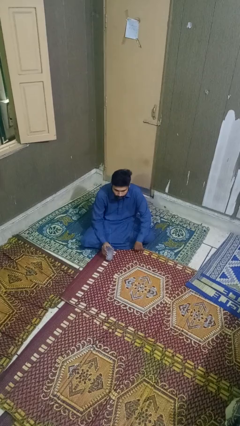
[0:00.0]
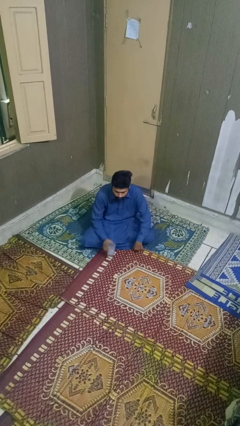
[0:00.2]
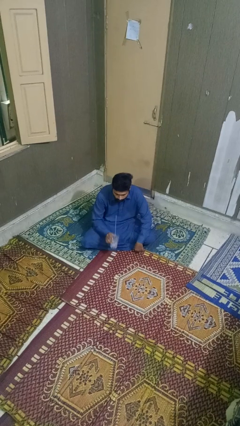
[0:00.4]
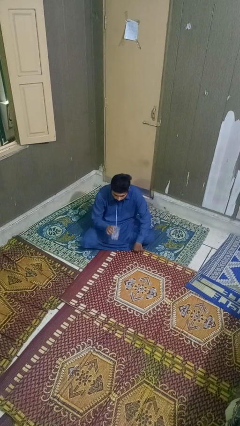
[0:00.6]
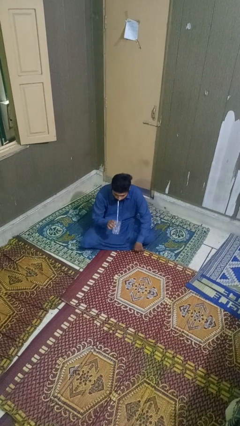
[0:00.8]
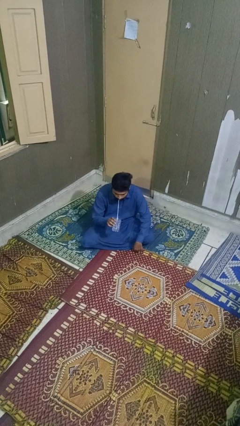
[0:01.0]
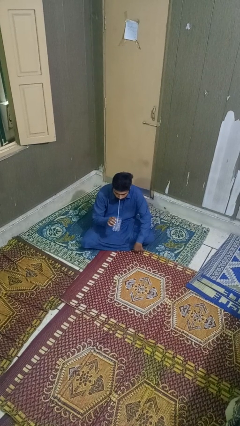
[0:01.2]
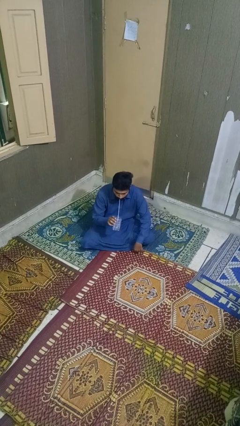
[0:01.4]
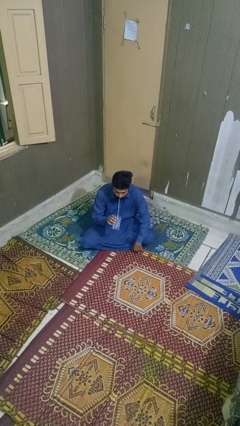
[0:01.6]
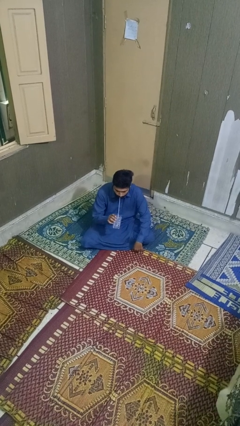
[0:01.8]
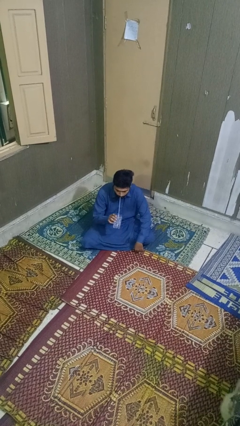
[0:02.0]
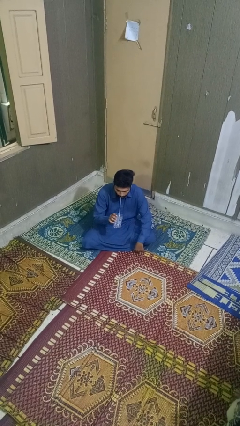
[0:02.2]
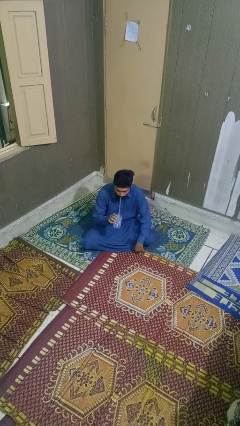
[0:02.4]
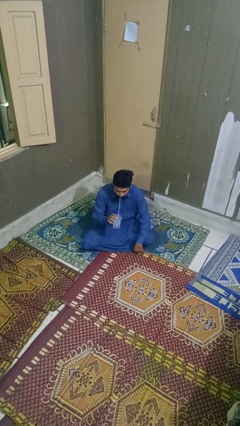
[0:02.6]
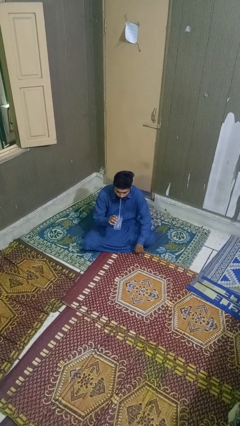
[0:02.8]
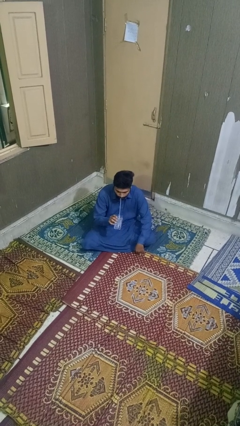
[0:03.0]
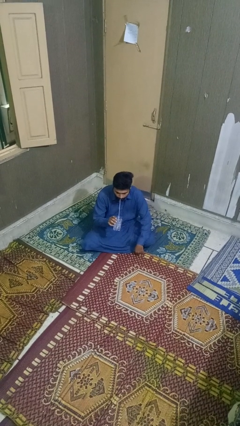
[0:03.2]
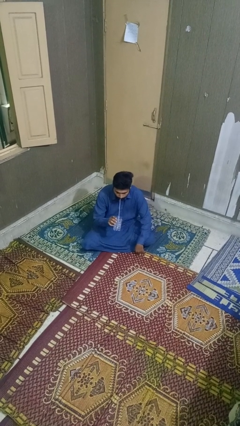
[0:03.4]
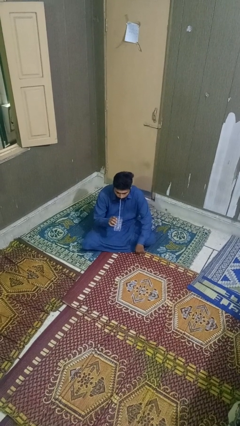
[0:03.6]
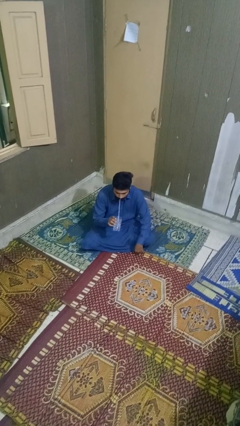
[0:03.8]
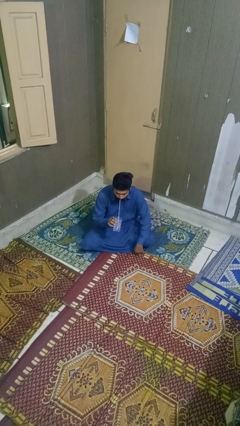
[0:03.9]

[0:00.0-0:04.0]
person drinks from straw

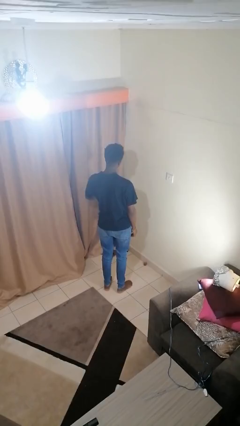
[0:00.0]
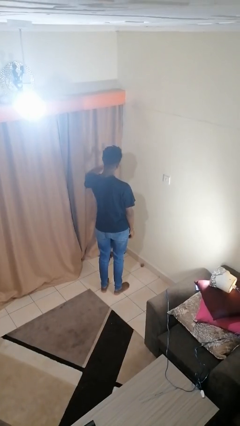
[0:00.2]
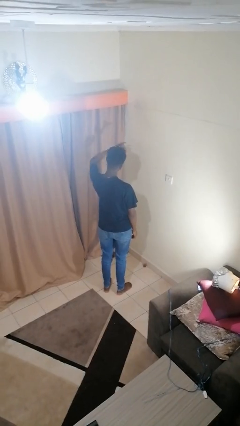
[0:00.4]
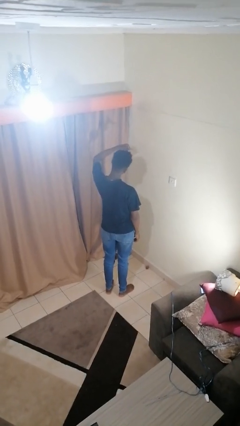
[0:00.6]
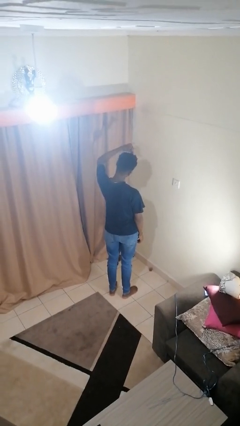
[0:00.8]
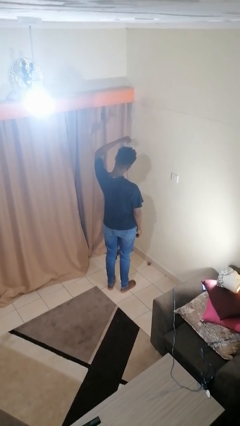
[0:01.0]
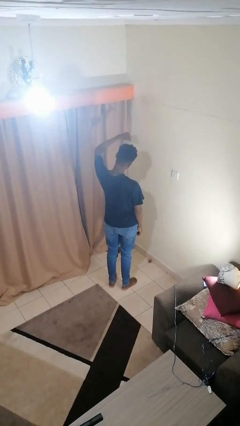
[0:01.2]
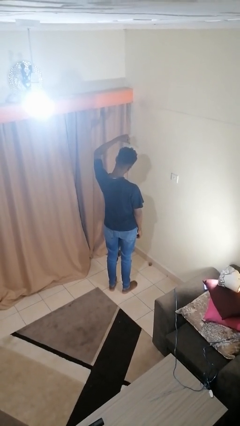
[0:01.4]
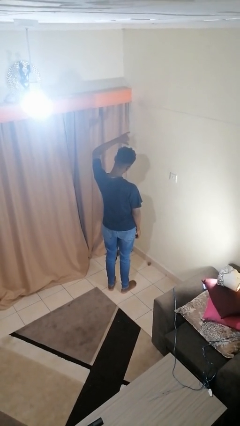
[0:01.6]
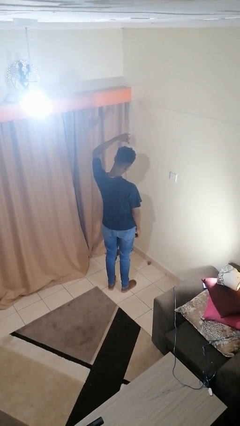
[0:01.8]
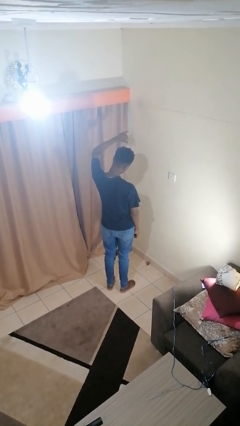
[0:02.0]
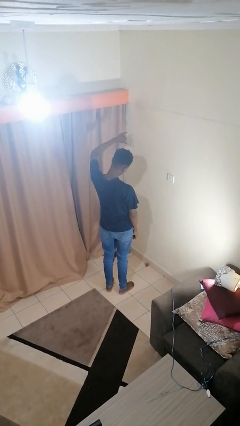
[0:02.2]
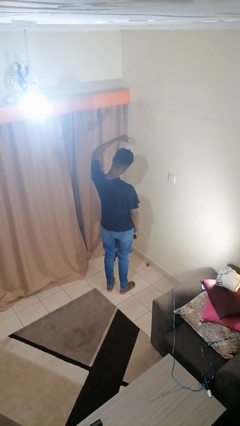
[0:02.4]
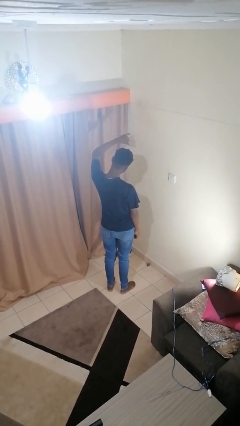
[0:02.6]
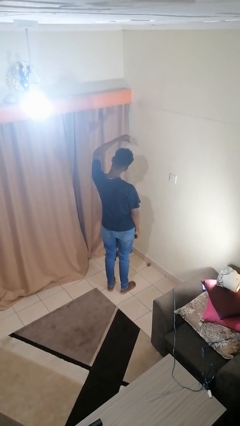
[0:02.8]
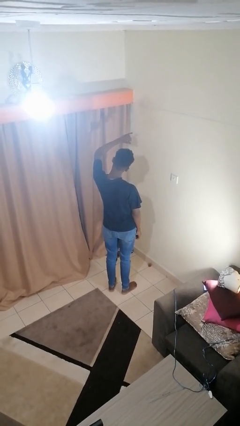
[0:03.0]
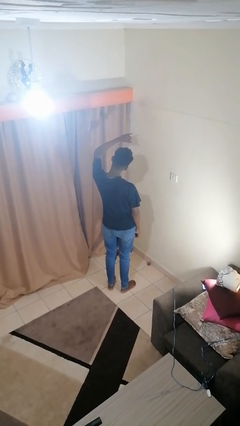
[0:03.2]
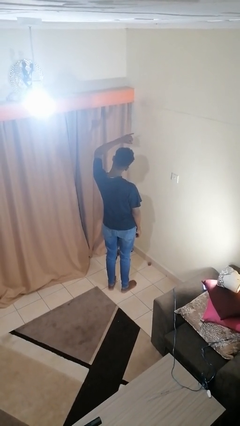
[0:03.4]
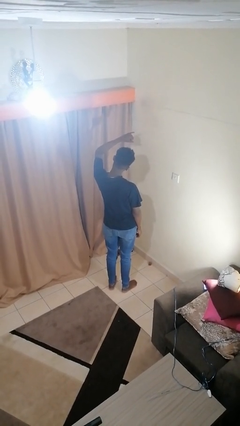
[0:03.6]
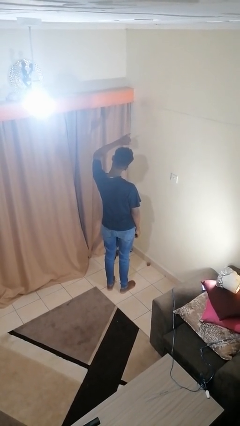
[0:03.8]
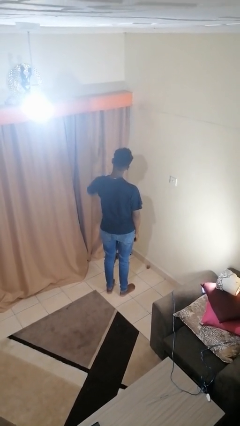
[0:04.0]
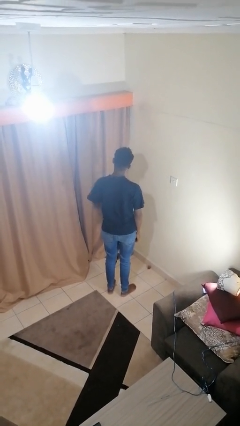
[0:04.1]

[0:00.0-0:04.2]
person gestures hang loose

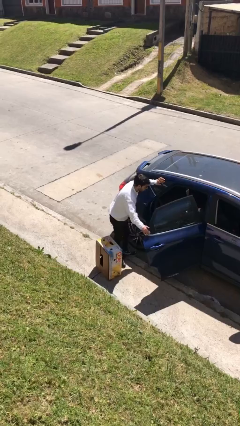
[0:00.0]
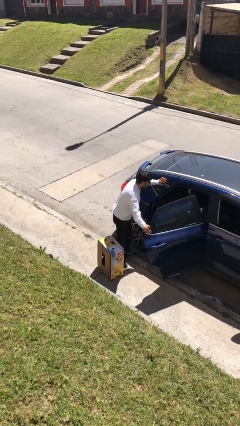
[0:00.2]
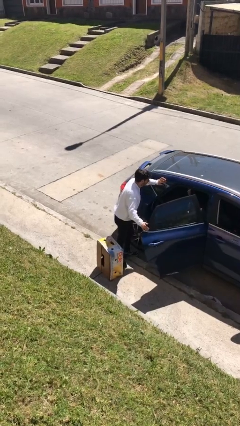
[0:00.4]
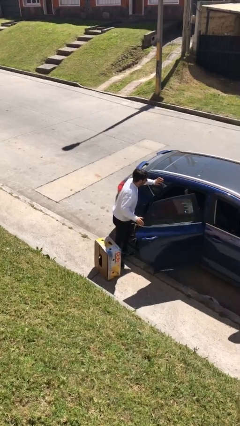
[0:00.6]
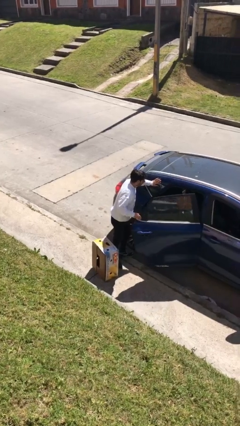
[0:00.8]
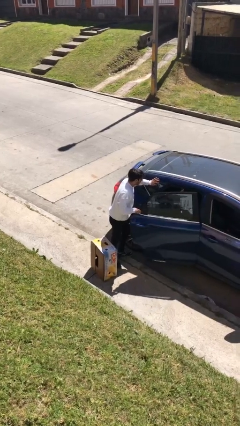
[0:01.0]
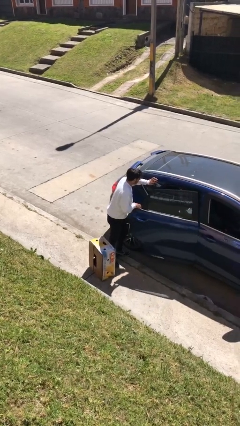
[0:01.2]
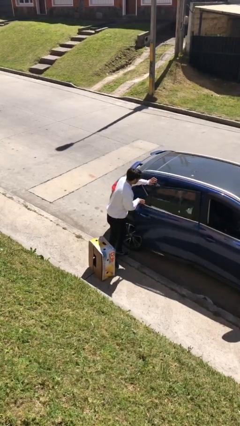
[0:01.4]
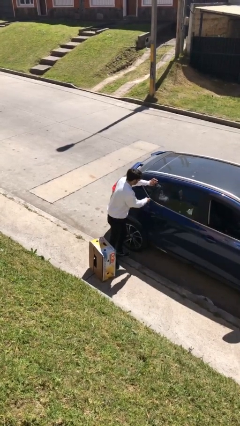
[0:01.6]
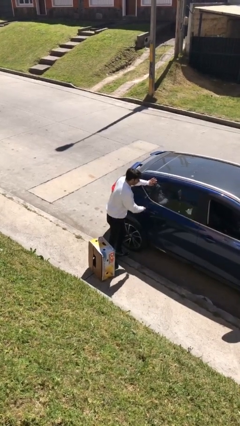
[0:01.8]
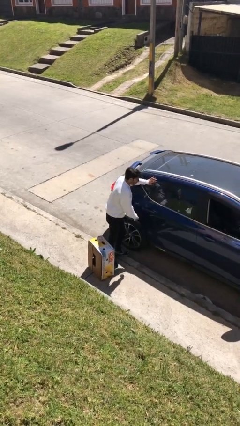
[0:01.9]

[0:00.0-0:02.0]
person closes car door

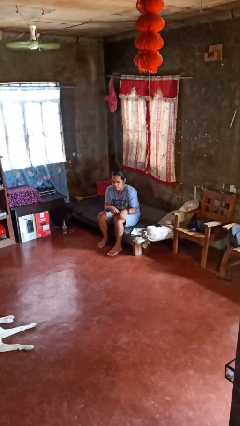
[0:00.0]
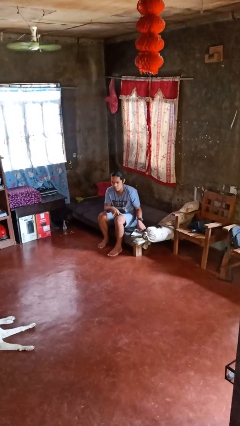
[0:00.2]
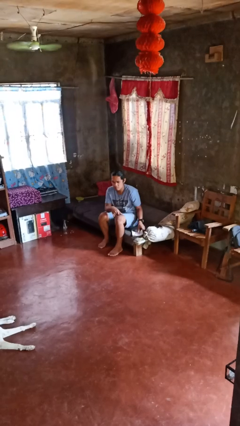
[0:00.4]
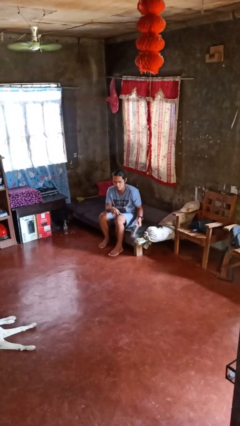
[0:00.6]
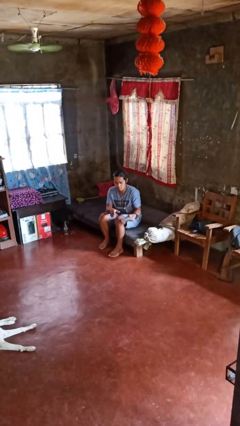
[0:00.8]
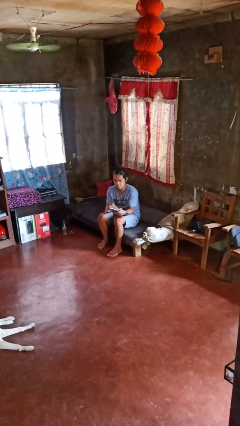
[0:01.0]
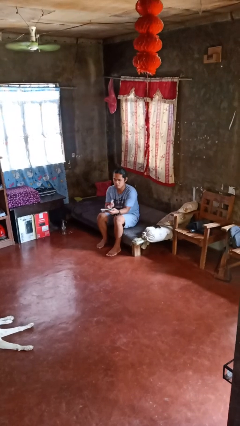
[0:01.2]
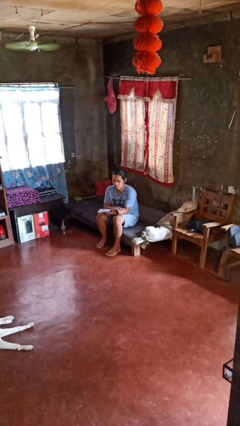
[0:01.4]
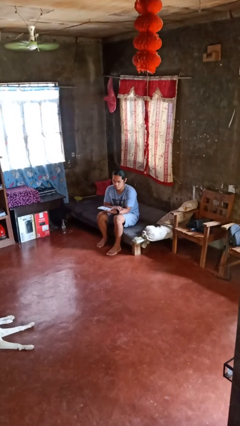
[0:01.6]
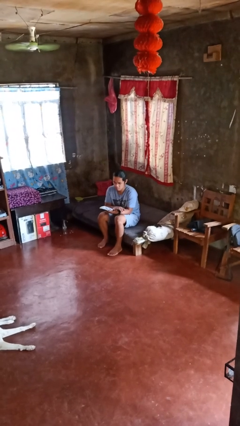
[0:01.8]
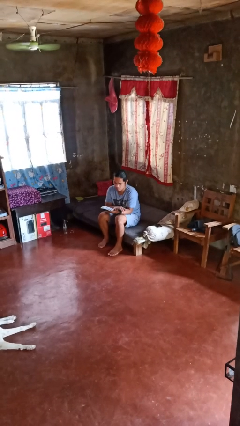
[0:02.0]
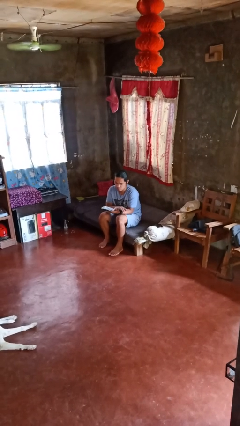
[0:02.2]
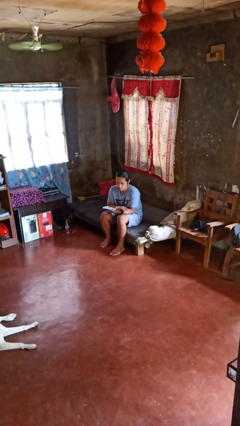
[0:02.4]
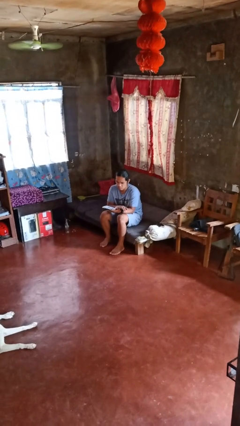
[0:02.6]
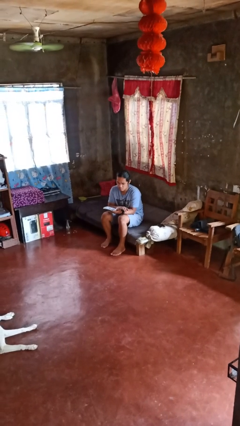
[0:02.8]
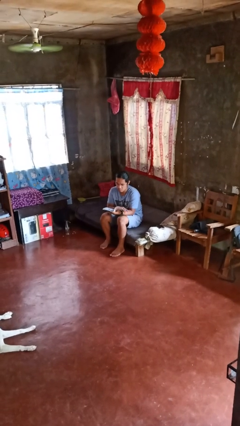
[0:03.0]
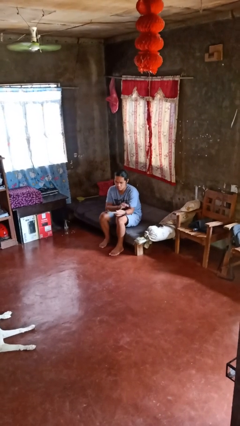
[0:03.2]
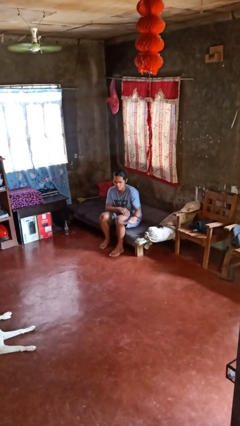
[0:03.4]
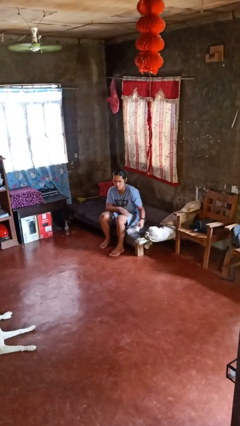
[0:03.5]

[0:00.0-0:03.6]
person reads magazine

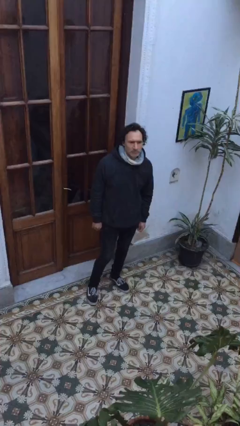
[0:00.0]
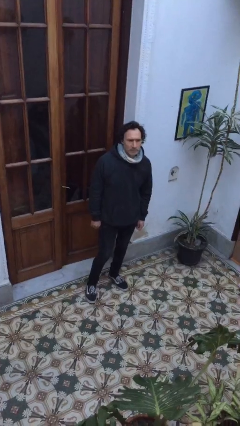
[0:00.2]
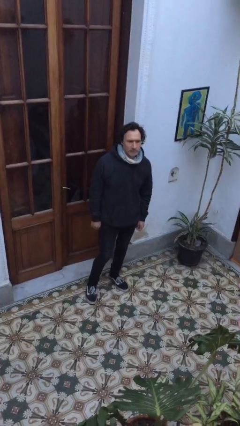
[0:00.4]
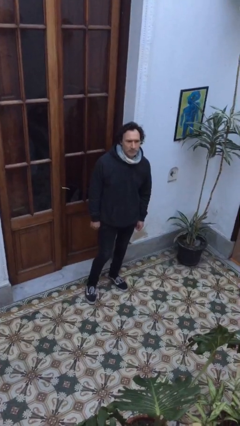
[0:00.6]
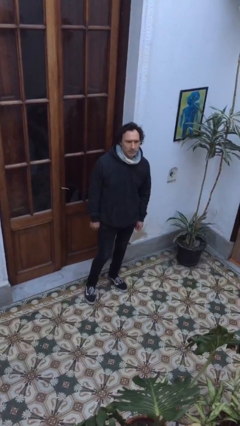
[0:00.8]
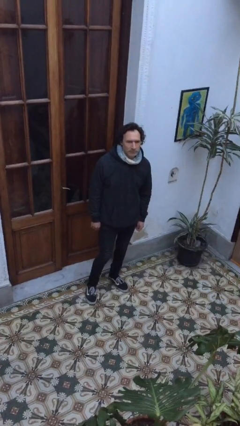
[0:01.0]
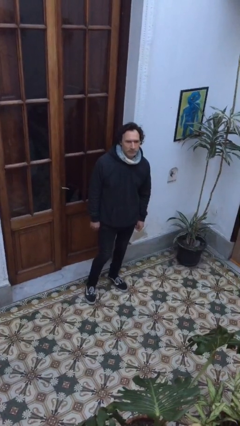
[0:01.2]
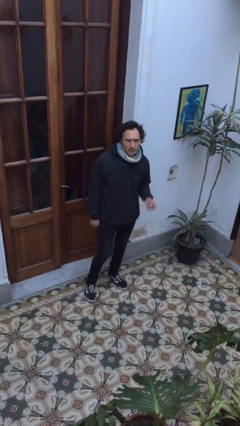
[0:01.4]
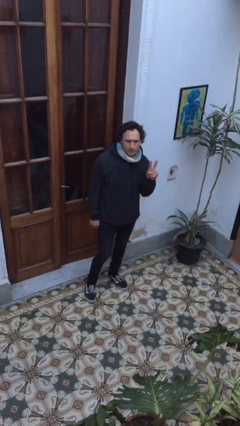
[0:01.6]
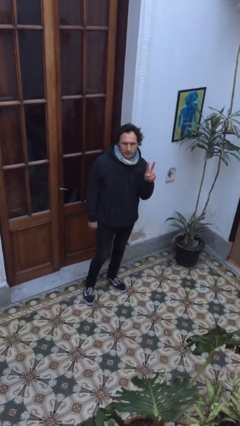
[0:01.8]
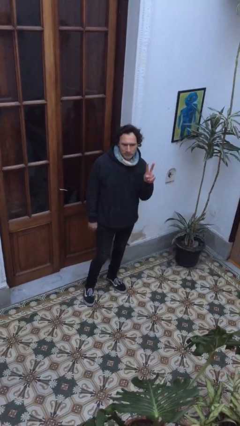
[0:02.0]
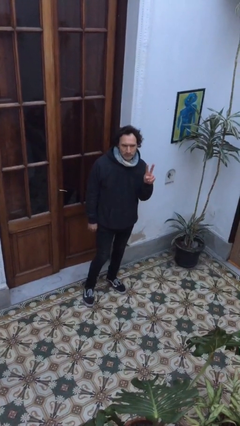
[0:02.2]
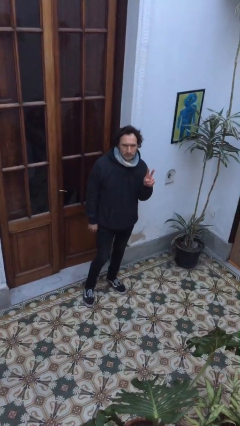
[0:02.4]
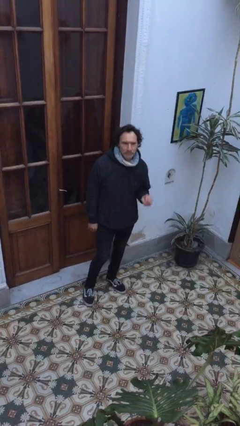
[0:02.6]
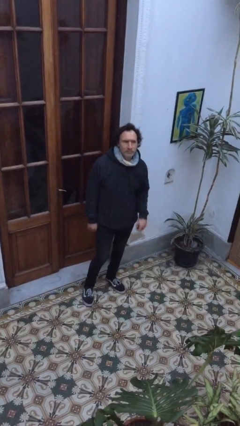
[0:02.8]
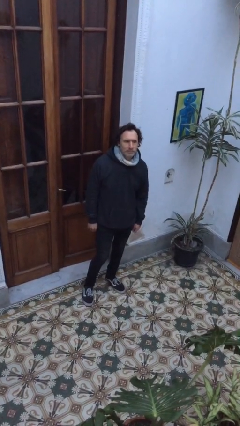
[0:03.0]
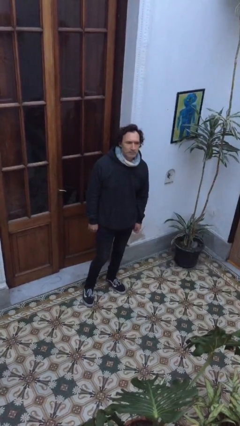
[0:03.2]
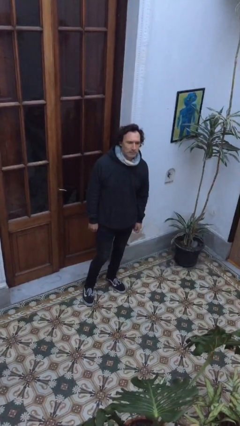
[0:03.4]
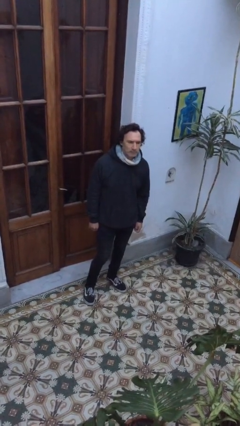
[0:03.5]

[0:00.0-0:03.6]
person gestures peace
